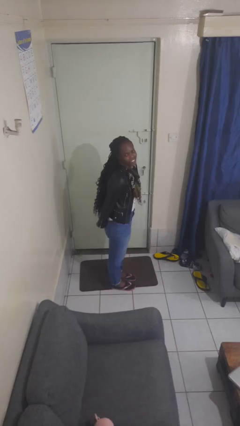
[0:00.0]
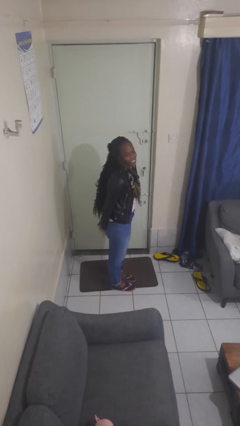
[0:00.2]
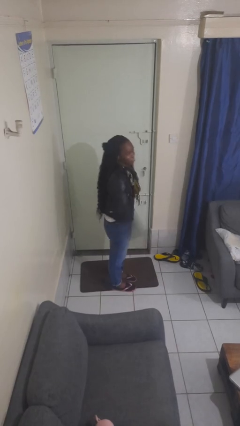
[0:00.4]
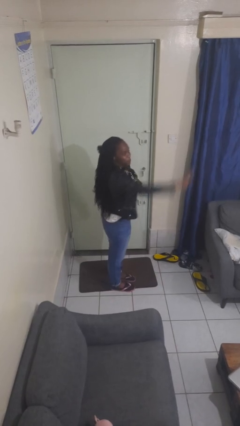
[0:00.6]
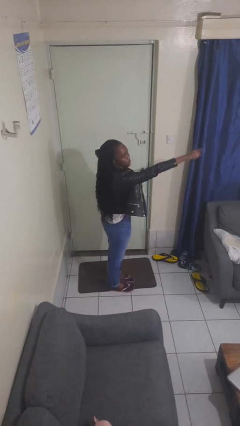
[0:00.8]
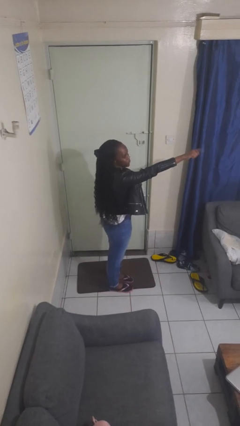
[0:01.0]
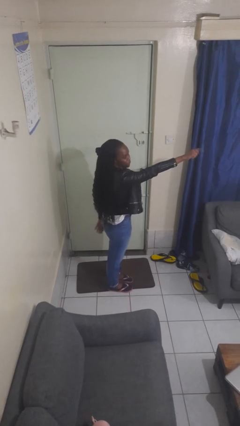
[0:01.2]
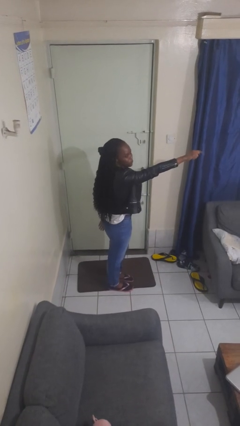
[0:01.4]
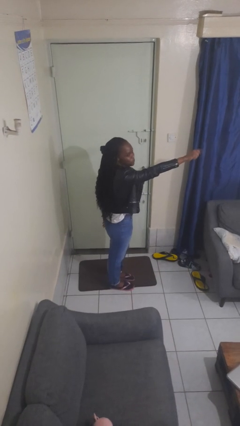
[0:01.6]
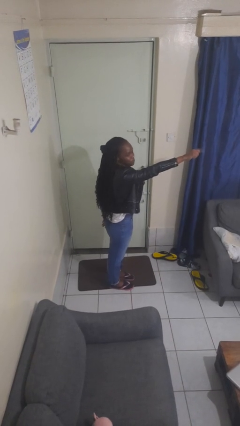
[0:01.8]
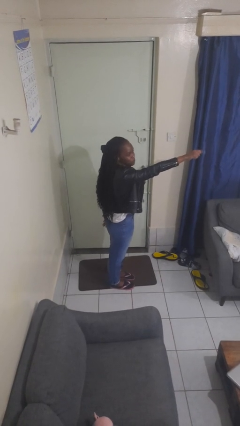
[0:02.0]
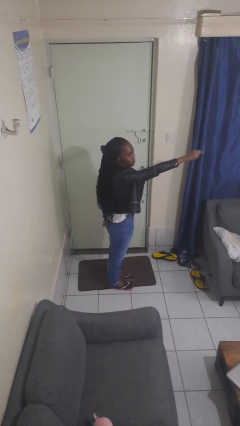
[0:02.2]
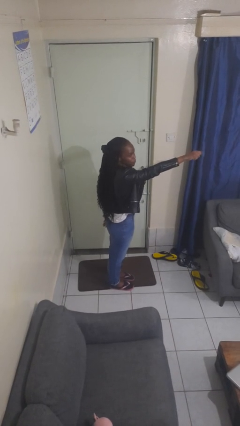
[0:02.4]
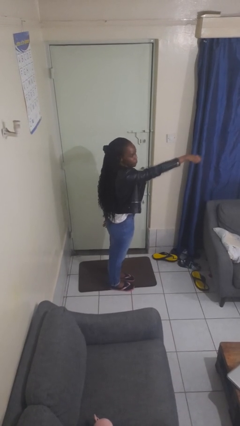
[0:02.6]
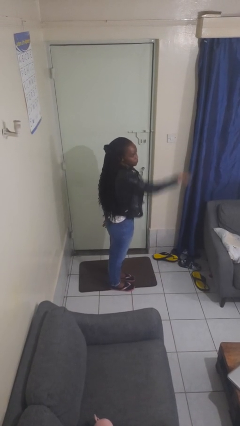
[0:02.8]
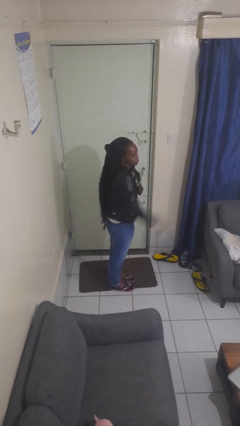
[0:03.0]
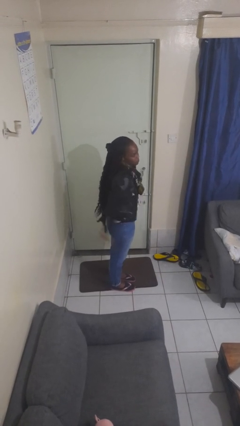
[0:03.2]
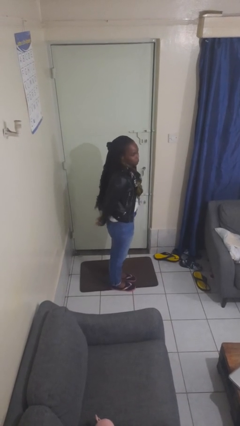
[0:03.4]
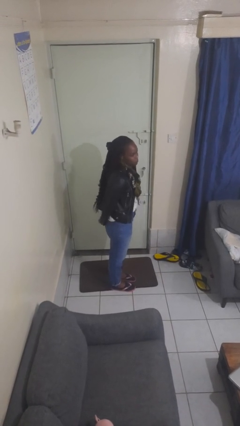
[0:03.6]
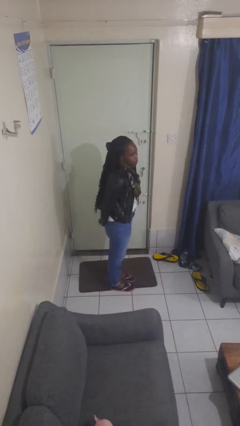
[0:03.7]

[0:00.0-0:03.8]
person points at person

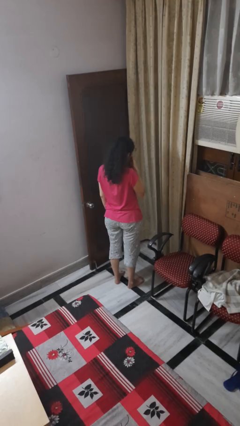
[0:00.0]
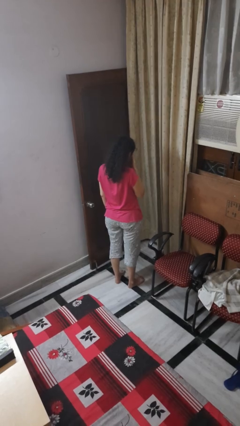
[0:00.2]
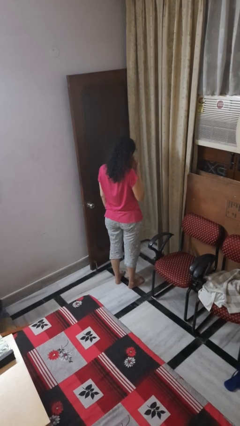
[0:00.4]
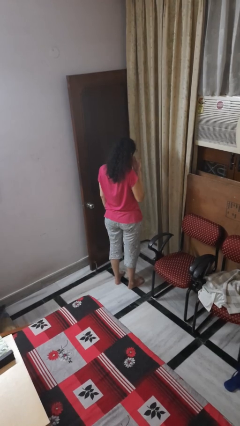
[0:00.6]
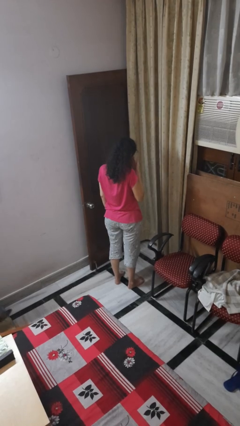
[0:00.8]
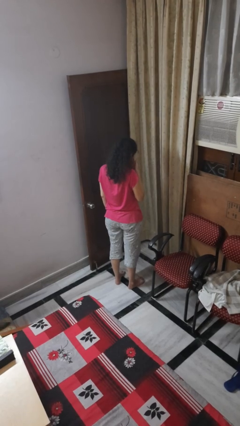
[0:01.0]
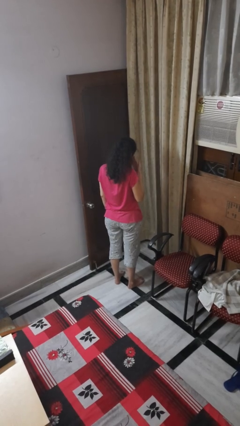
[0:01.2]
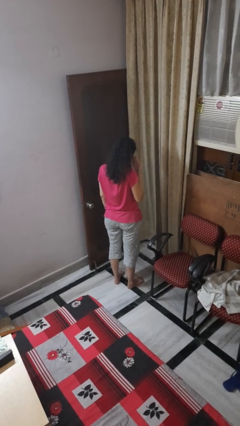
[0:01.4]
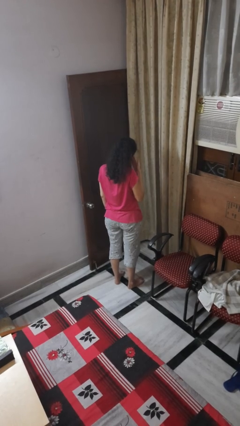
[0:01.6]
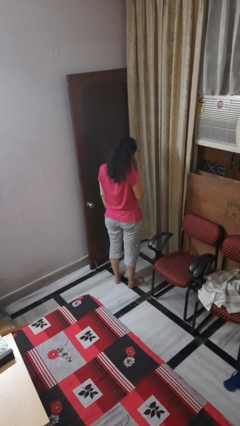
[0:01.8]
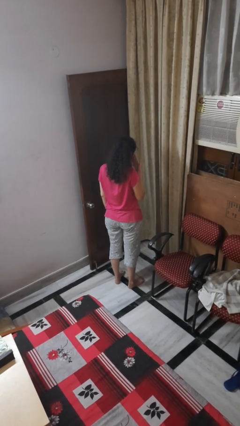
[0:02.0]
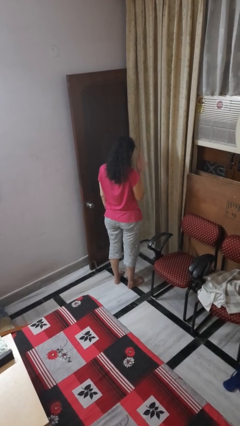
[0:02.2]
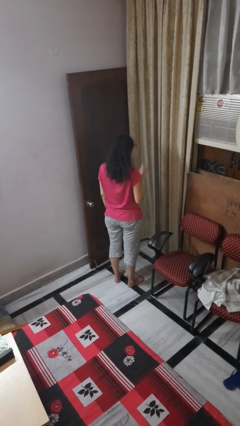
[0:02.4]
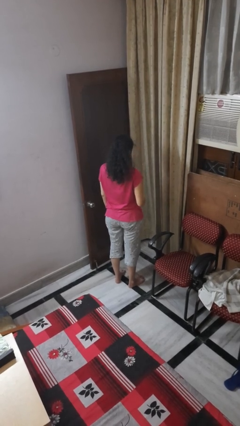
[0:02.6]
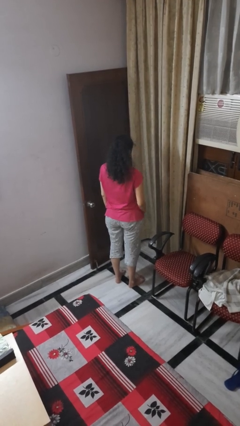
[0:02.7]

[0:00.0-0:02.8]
person rubs eyes

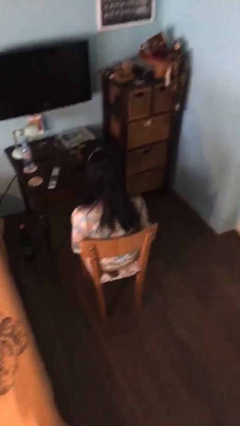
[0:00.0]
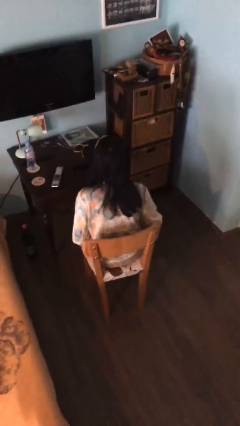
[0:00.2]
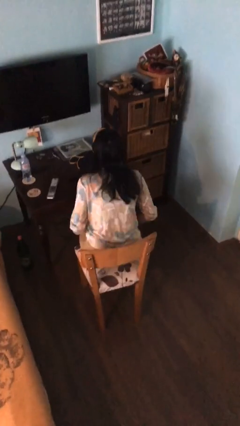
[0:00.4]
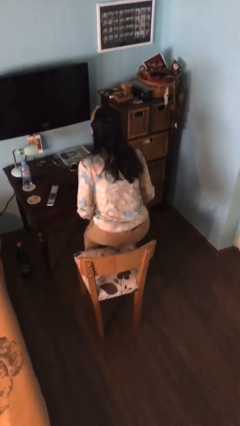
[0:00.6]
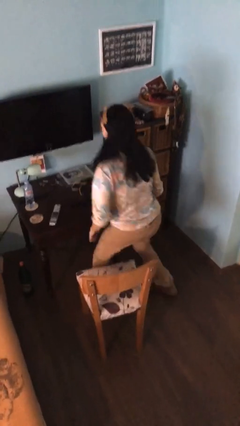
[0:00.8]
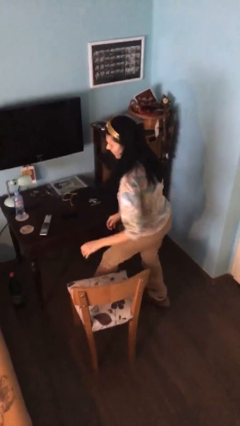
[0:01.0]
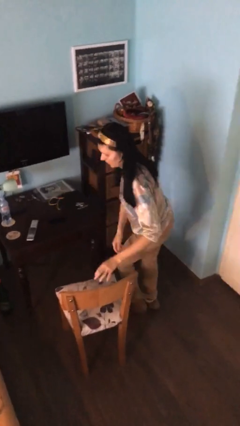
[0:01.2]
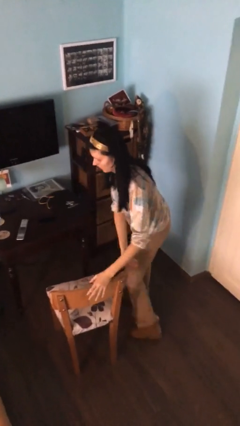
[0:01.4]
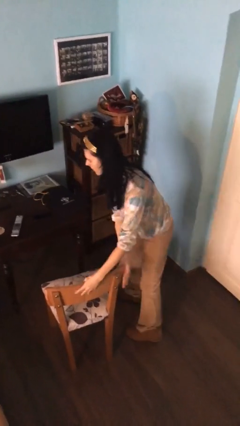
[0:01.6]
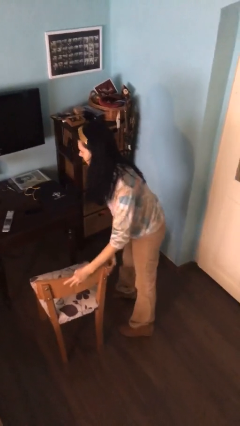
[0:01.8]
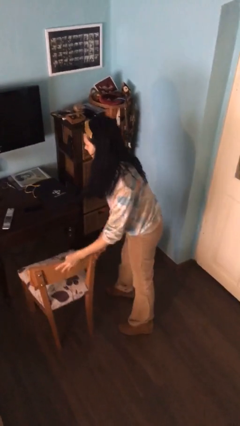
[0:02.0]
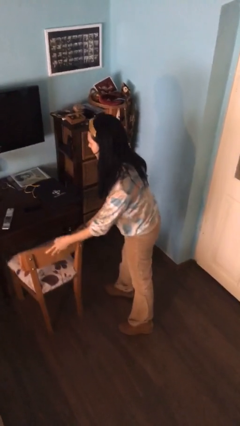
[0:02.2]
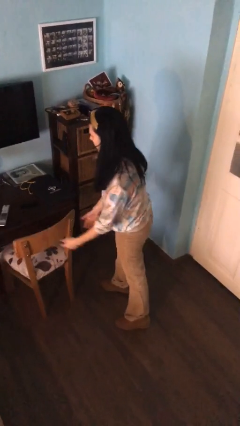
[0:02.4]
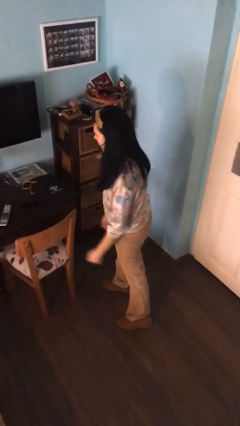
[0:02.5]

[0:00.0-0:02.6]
person stands up

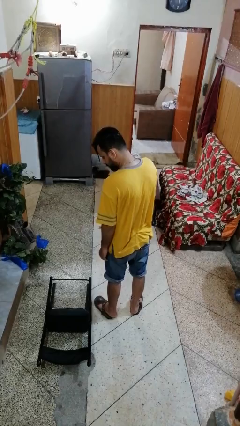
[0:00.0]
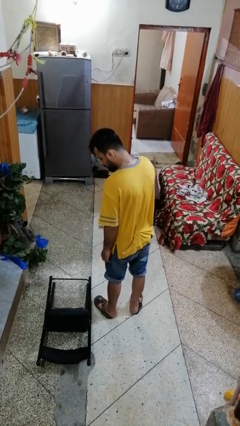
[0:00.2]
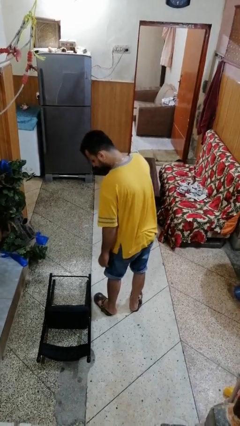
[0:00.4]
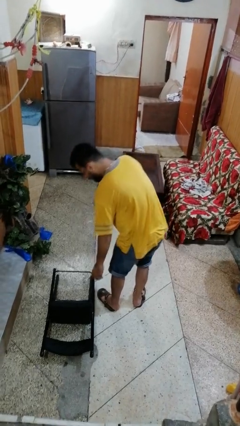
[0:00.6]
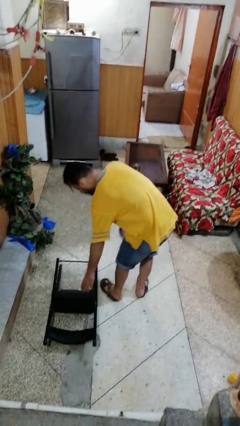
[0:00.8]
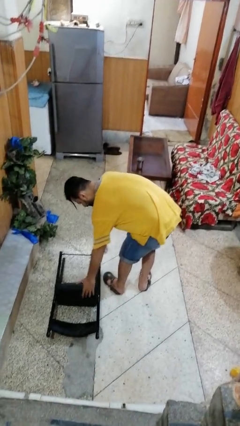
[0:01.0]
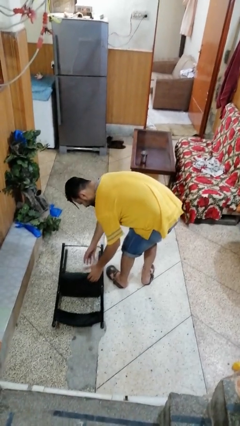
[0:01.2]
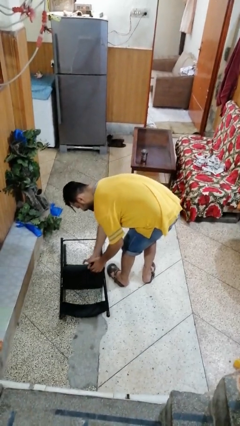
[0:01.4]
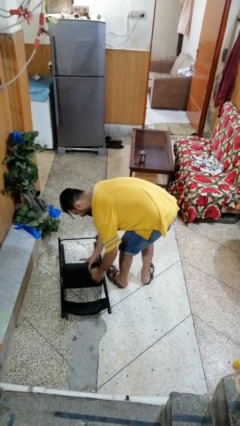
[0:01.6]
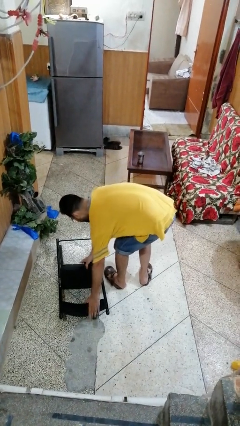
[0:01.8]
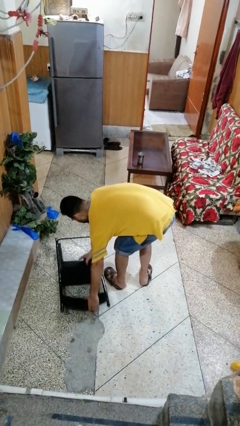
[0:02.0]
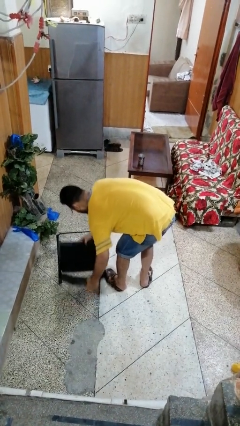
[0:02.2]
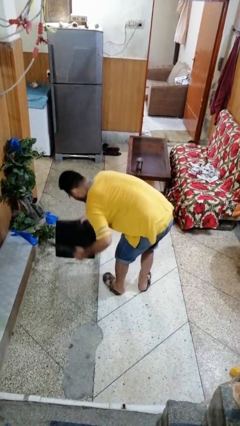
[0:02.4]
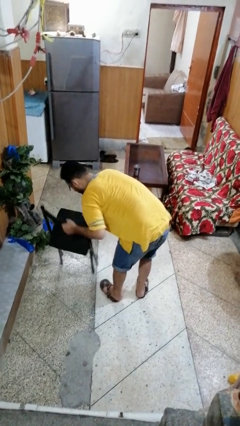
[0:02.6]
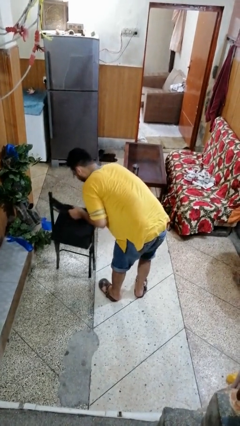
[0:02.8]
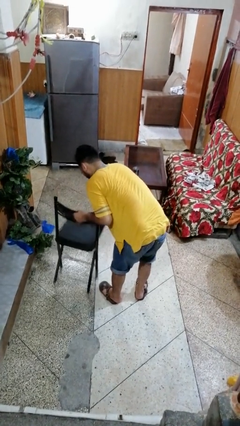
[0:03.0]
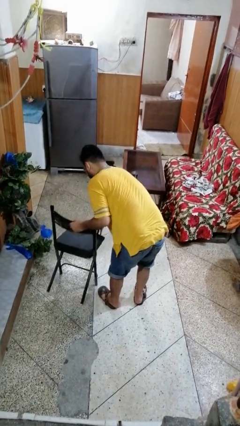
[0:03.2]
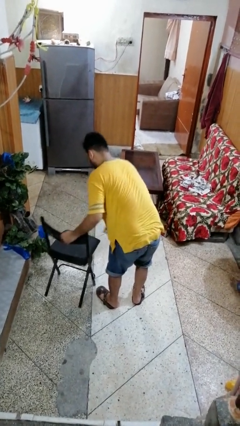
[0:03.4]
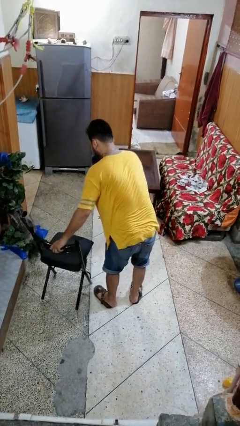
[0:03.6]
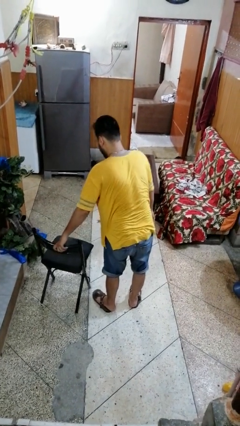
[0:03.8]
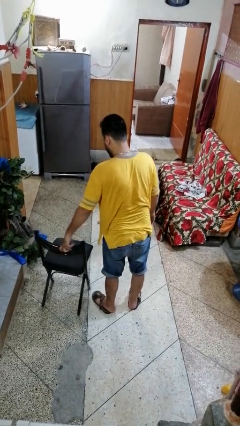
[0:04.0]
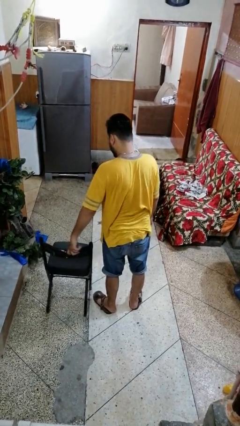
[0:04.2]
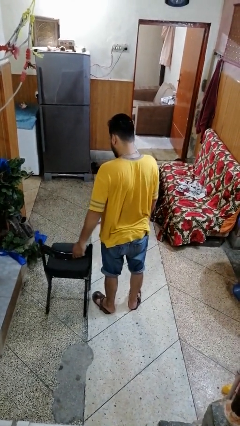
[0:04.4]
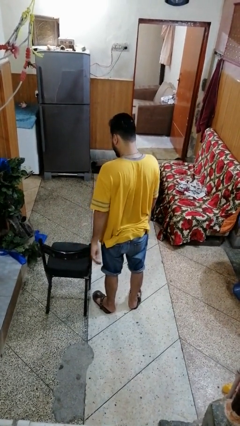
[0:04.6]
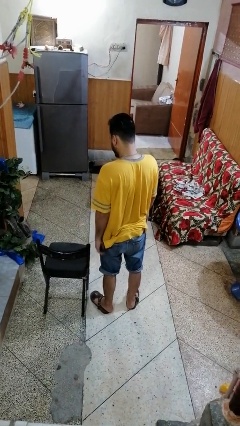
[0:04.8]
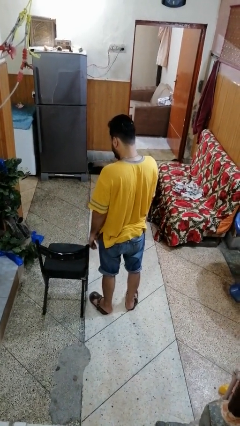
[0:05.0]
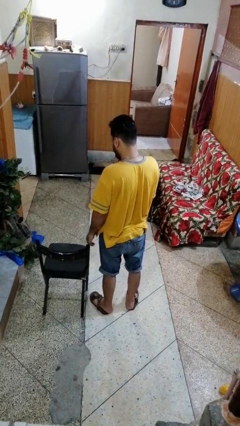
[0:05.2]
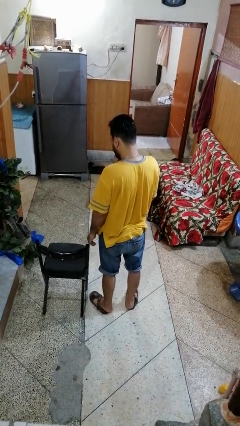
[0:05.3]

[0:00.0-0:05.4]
person sets upright furniture

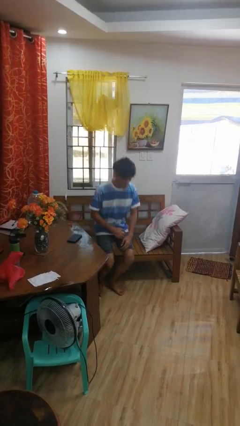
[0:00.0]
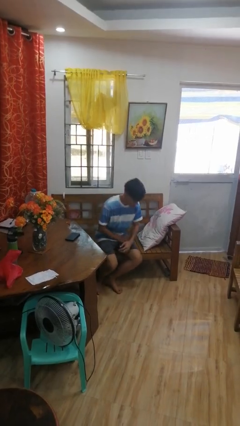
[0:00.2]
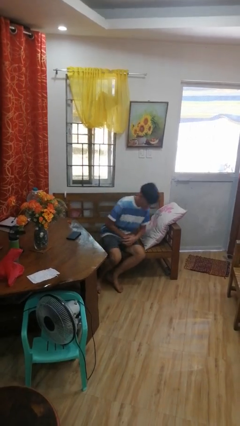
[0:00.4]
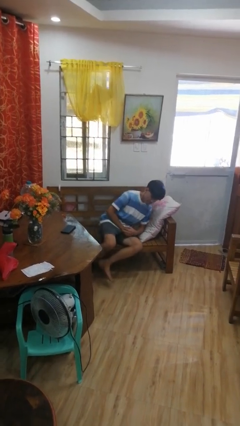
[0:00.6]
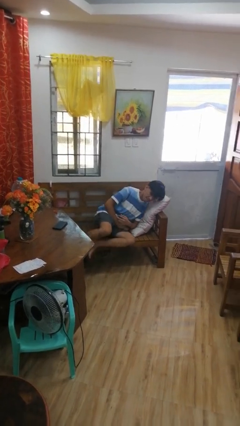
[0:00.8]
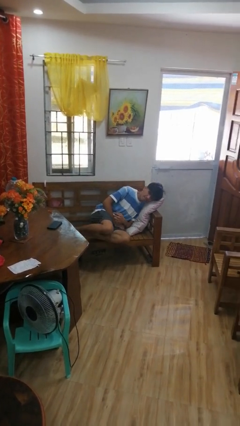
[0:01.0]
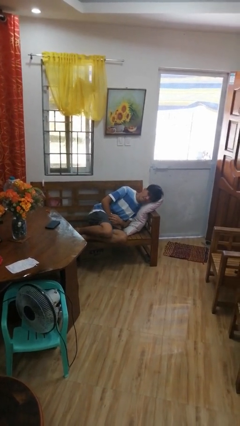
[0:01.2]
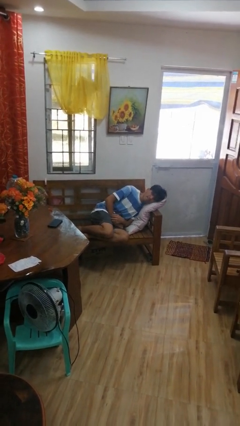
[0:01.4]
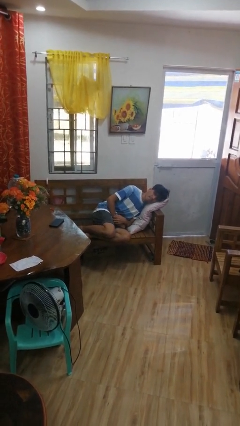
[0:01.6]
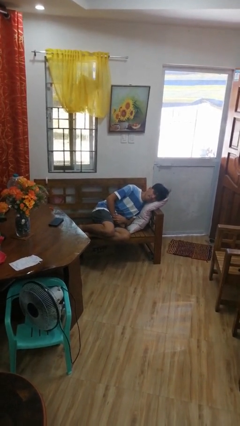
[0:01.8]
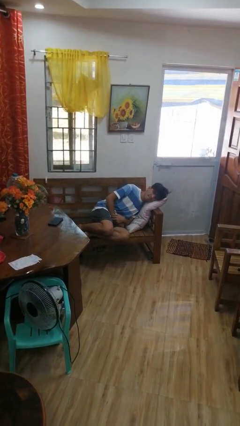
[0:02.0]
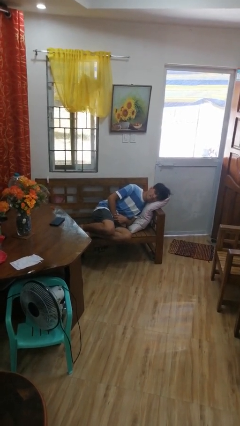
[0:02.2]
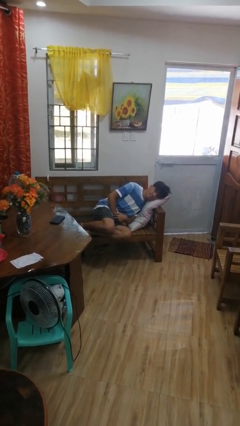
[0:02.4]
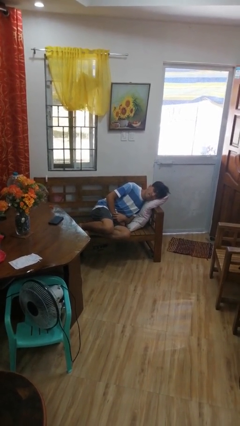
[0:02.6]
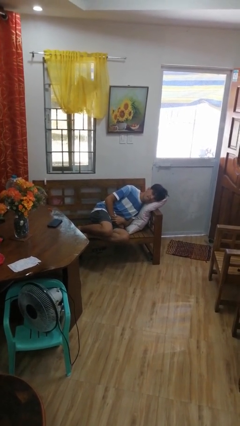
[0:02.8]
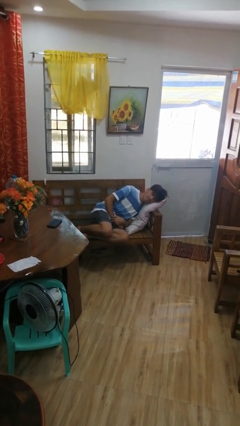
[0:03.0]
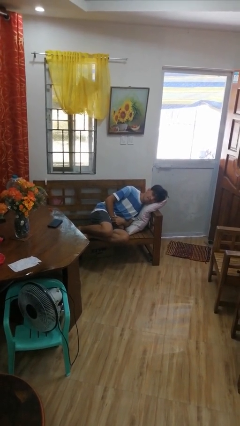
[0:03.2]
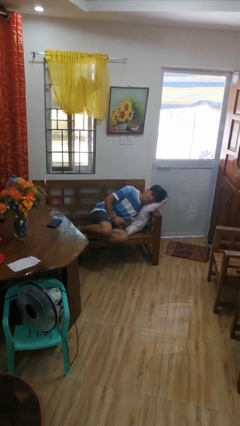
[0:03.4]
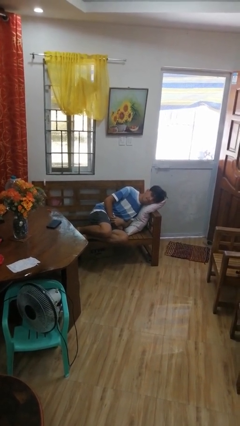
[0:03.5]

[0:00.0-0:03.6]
person lies down on couch
